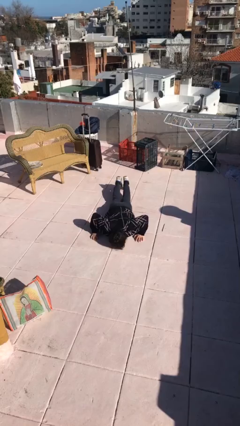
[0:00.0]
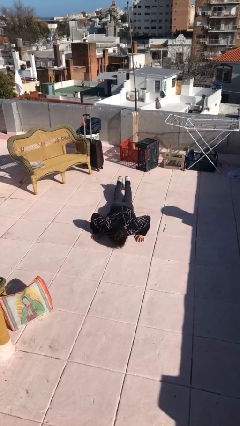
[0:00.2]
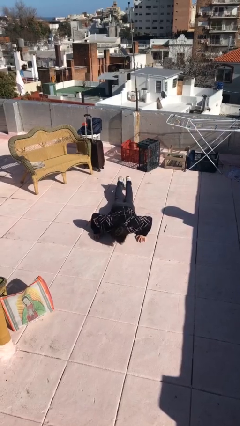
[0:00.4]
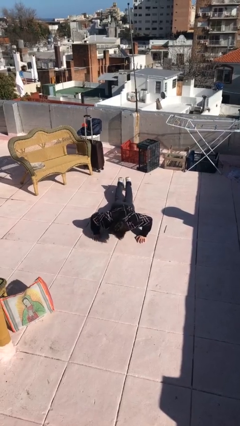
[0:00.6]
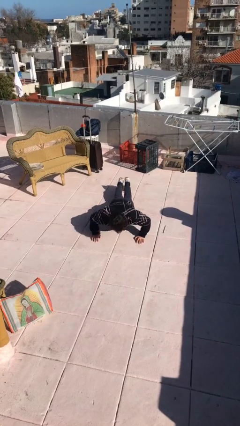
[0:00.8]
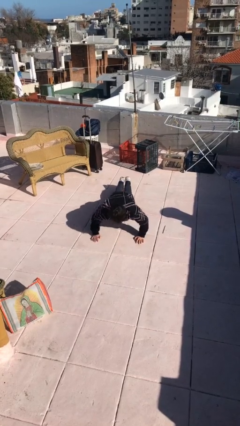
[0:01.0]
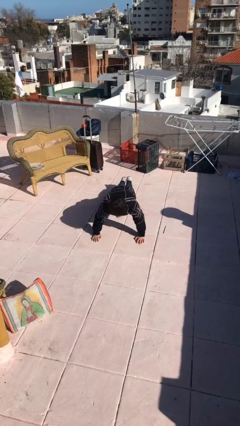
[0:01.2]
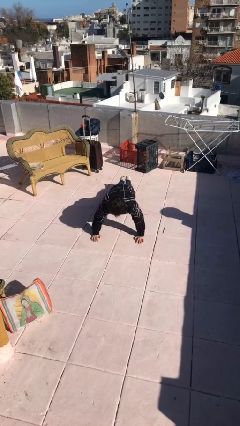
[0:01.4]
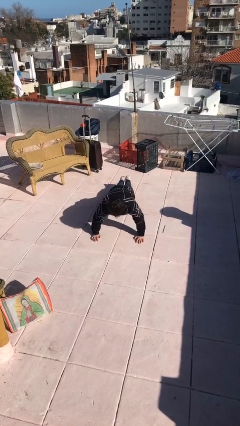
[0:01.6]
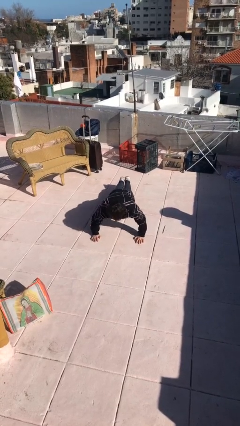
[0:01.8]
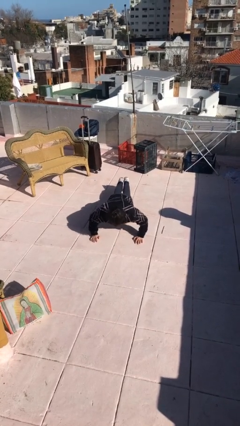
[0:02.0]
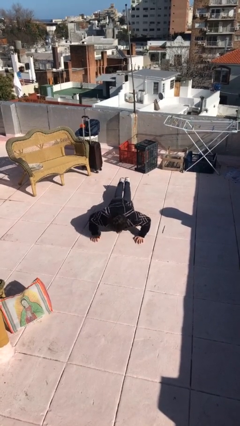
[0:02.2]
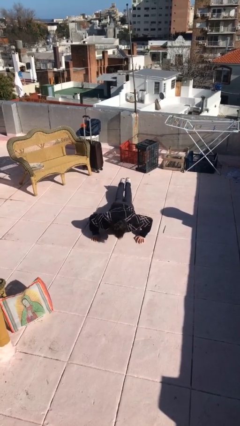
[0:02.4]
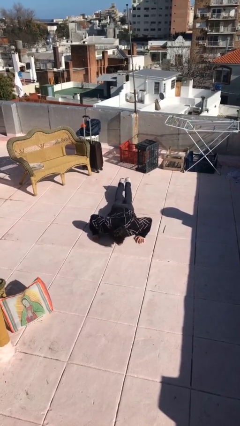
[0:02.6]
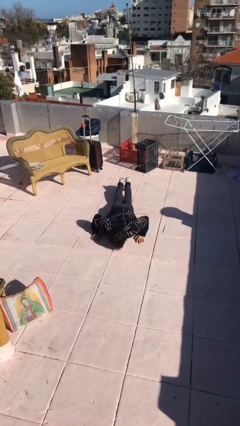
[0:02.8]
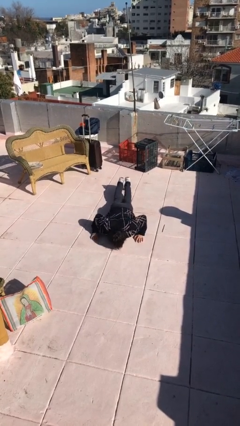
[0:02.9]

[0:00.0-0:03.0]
person exercises with pushup

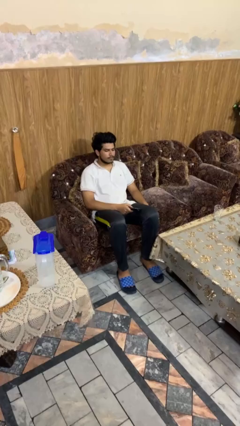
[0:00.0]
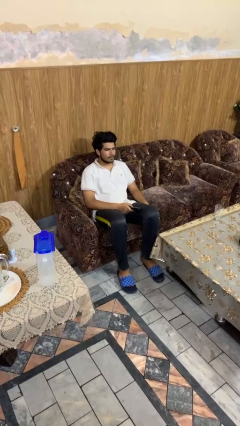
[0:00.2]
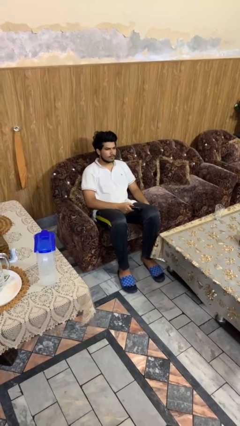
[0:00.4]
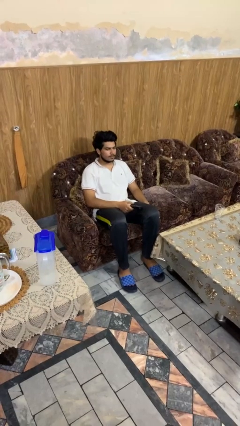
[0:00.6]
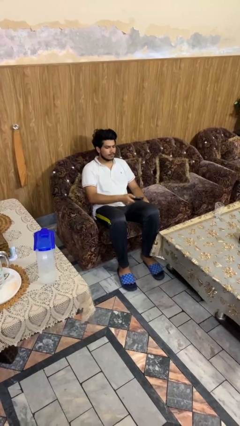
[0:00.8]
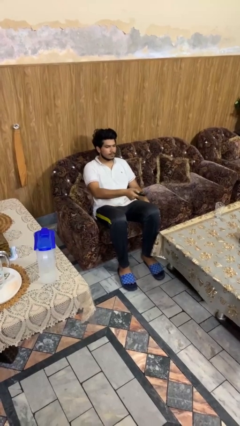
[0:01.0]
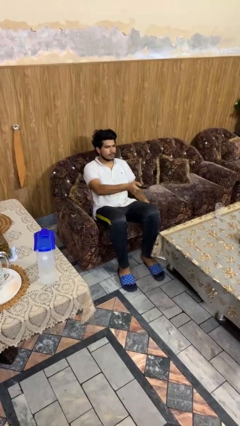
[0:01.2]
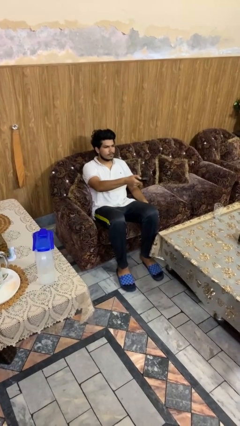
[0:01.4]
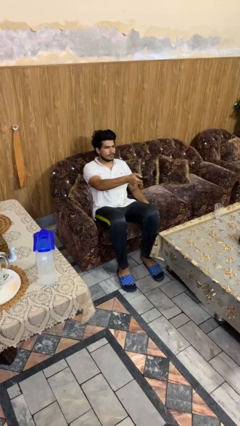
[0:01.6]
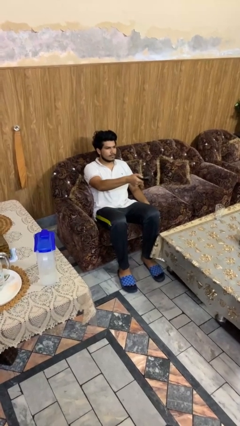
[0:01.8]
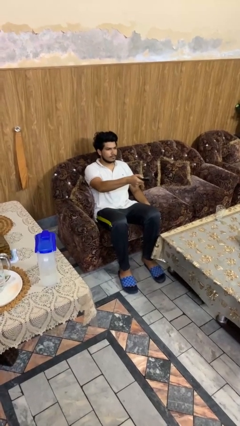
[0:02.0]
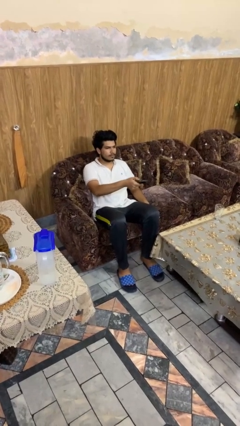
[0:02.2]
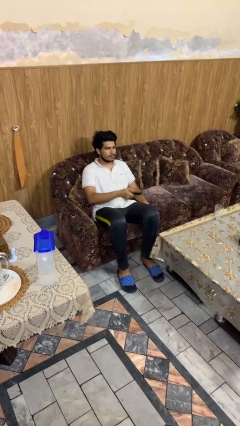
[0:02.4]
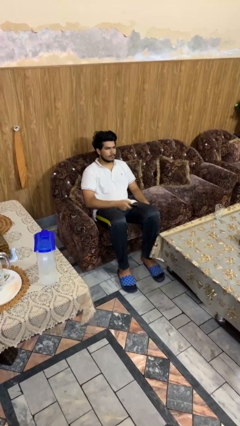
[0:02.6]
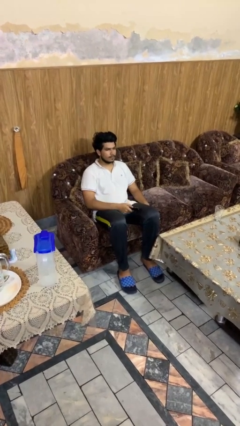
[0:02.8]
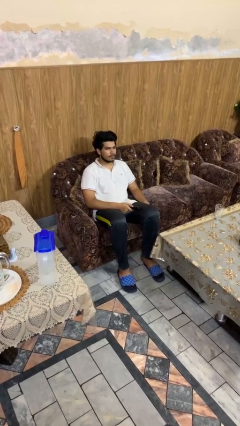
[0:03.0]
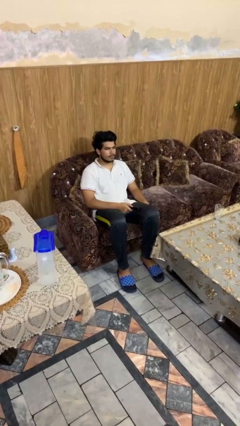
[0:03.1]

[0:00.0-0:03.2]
person uses television remote

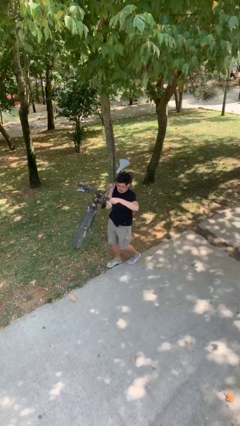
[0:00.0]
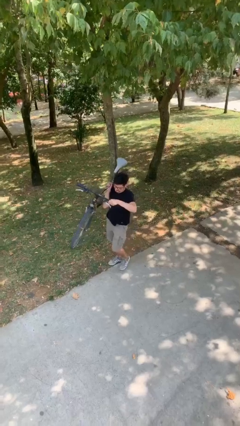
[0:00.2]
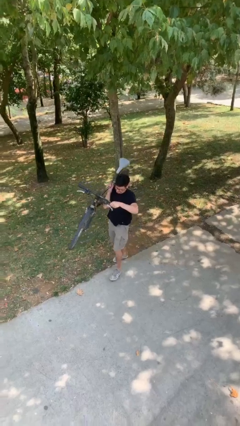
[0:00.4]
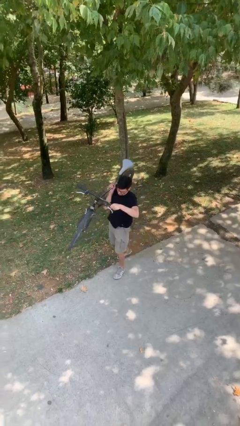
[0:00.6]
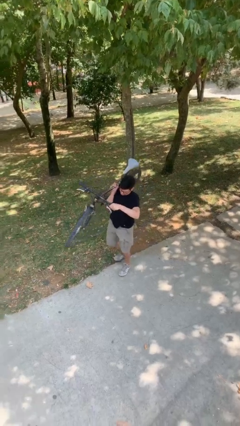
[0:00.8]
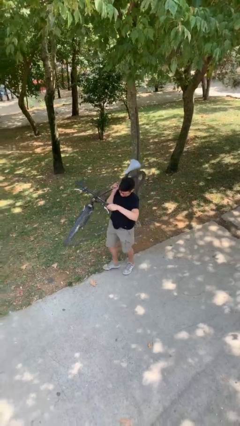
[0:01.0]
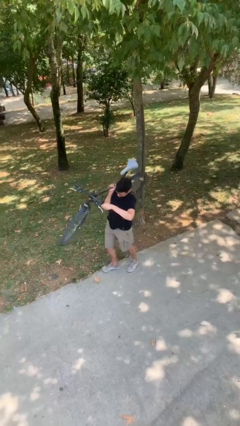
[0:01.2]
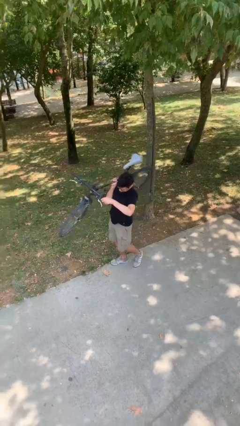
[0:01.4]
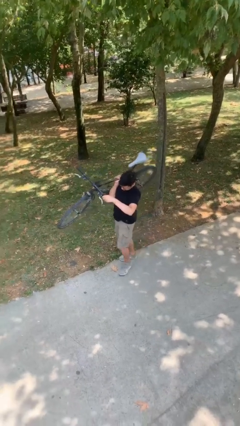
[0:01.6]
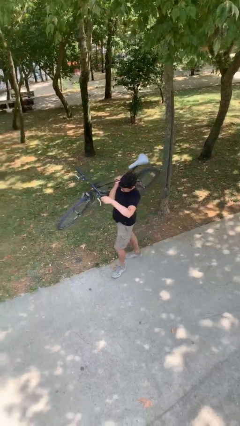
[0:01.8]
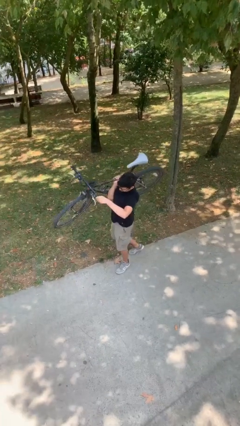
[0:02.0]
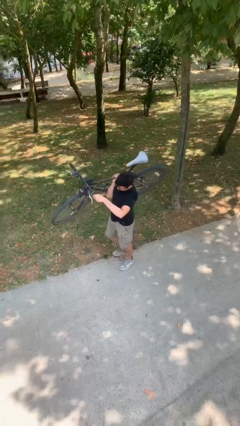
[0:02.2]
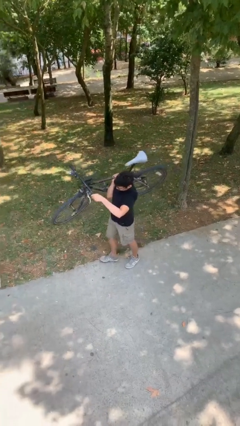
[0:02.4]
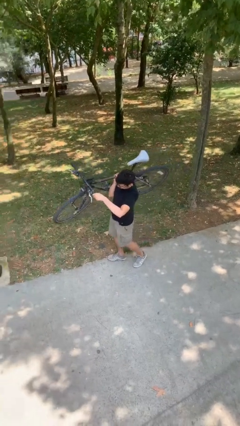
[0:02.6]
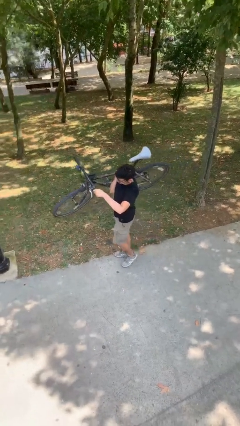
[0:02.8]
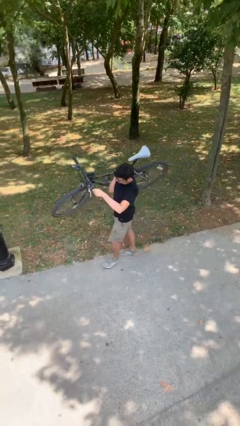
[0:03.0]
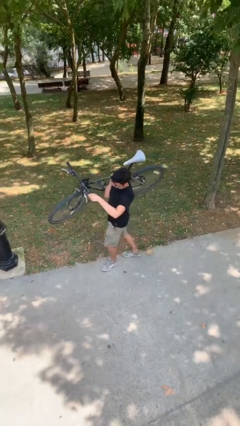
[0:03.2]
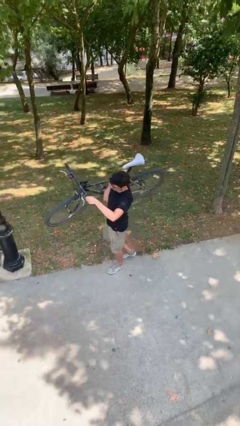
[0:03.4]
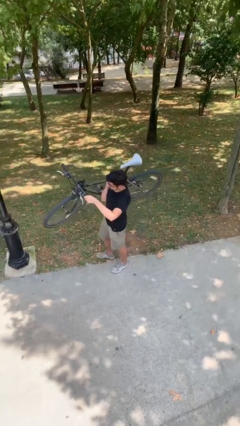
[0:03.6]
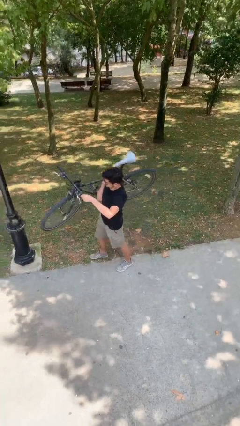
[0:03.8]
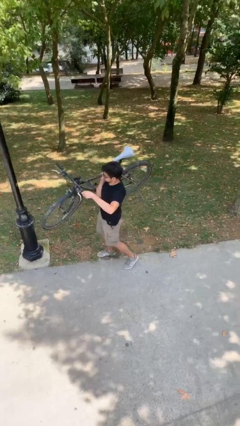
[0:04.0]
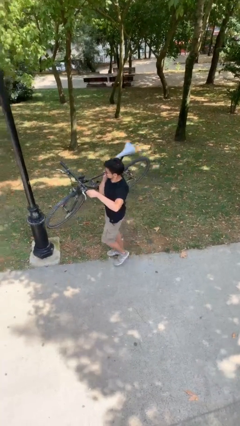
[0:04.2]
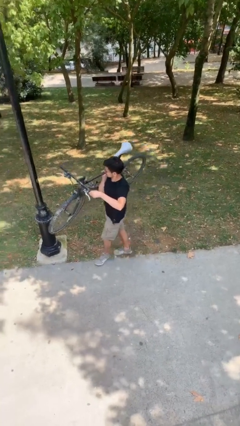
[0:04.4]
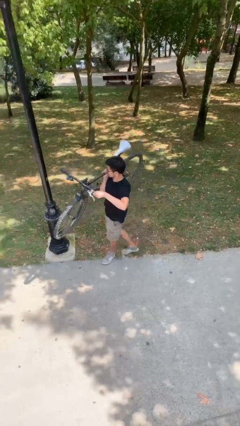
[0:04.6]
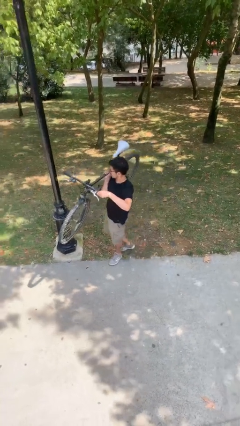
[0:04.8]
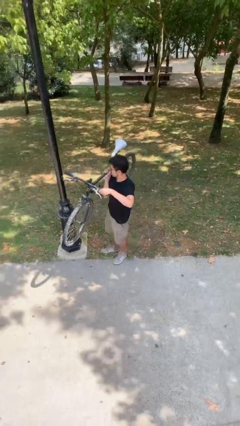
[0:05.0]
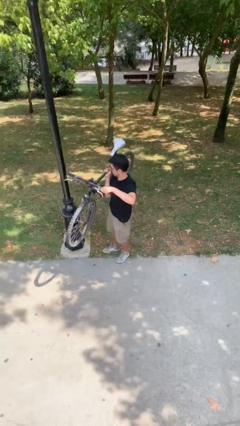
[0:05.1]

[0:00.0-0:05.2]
person carries heavy object

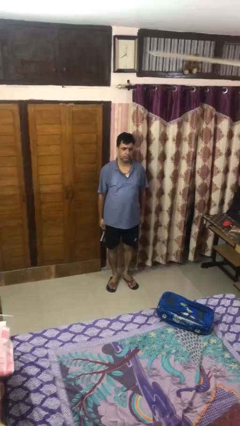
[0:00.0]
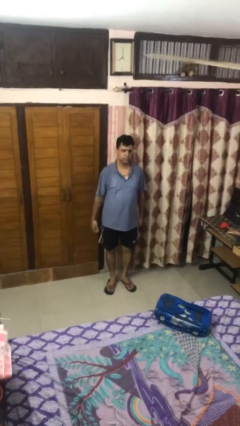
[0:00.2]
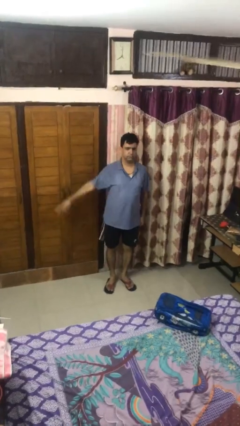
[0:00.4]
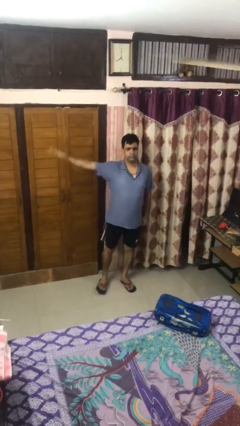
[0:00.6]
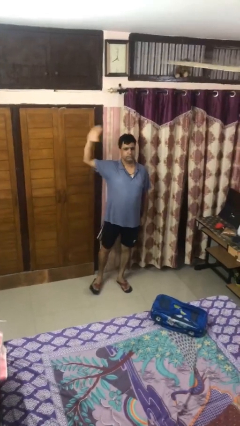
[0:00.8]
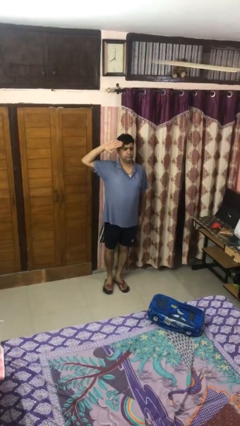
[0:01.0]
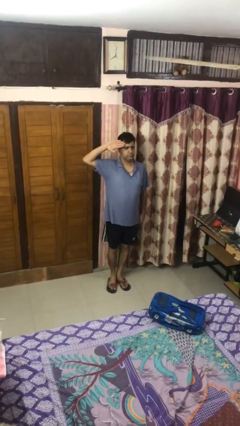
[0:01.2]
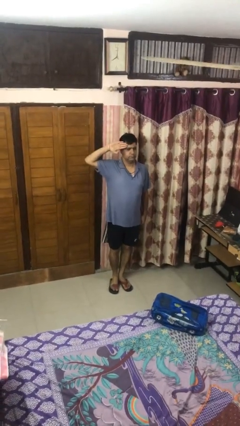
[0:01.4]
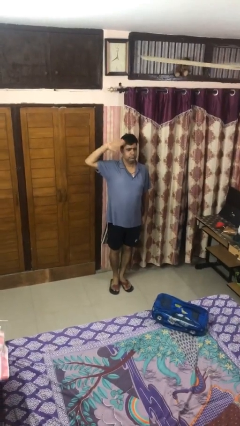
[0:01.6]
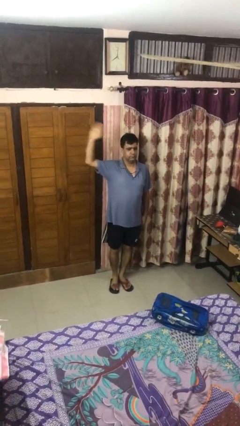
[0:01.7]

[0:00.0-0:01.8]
person salutes

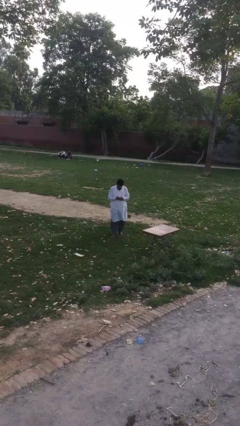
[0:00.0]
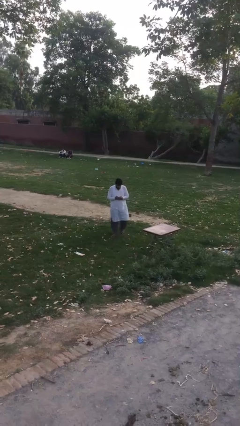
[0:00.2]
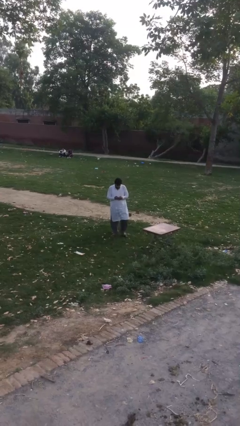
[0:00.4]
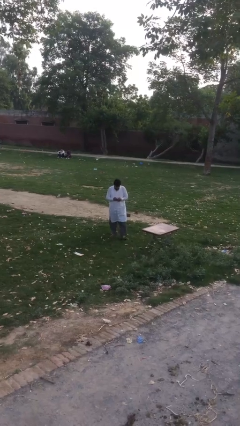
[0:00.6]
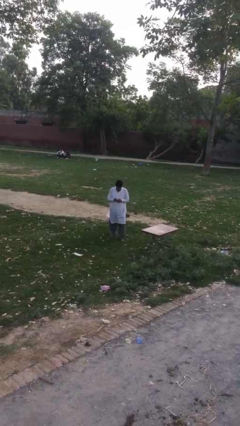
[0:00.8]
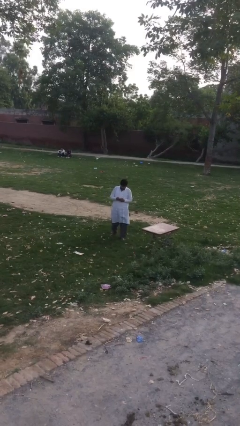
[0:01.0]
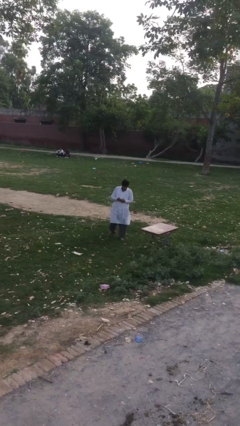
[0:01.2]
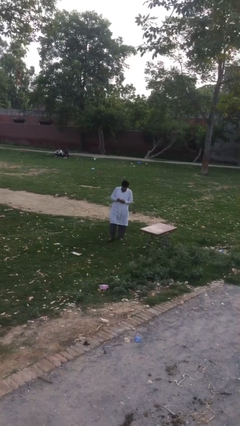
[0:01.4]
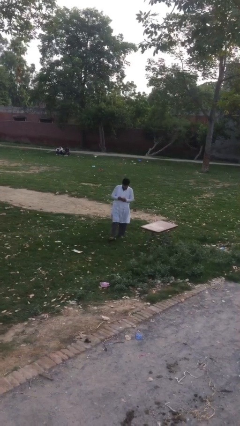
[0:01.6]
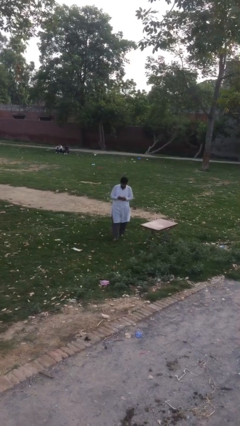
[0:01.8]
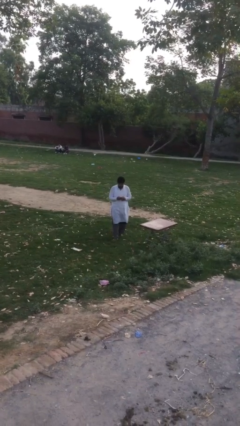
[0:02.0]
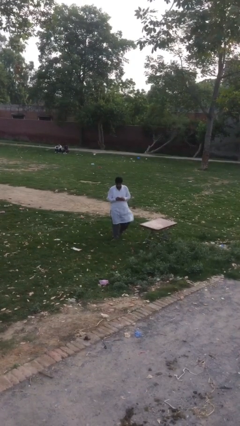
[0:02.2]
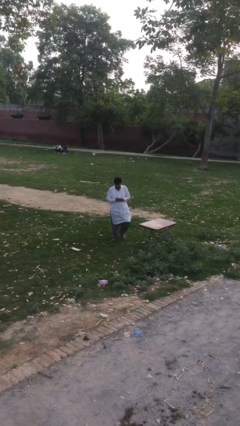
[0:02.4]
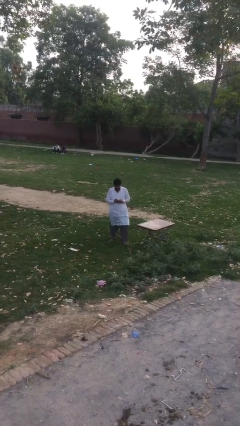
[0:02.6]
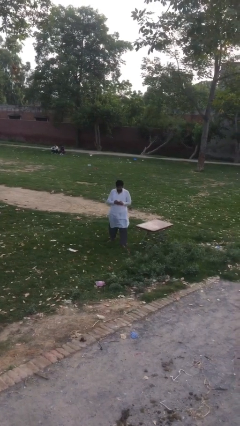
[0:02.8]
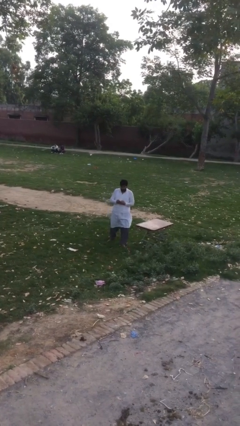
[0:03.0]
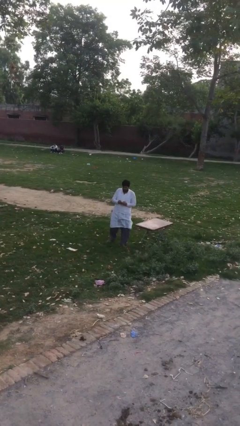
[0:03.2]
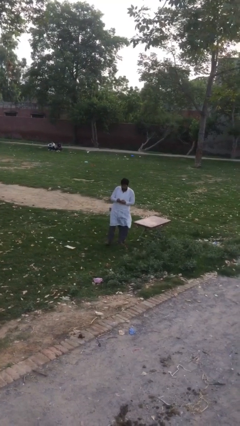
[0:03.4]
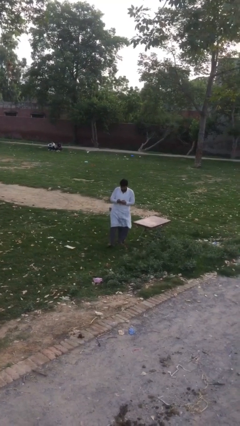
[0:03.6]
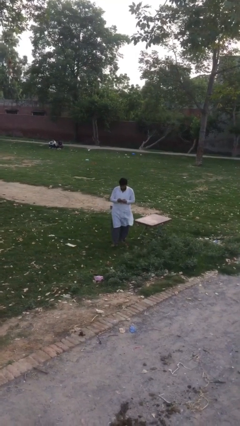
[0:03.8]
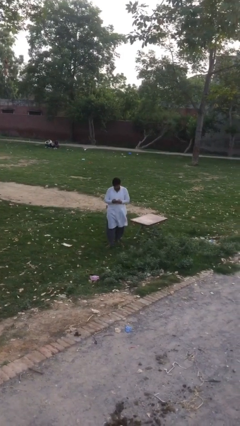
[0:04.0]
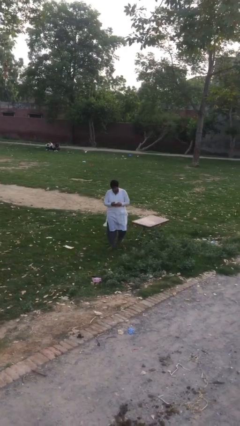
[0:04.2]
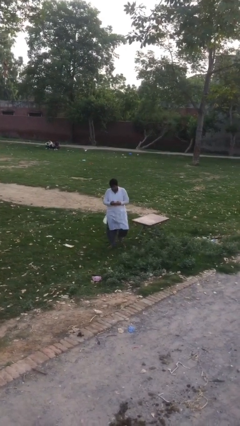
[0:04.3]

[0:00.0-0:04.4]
person texts on phone

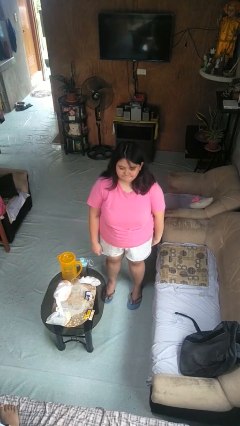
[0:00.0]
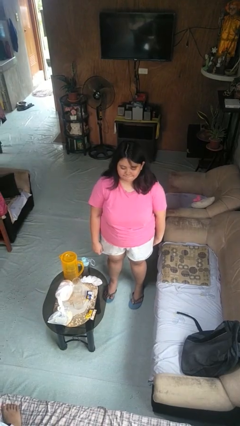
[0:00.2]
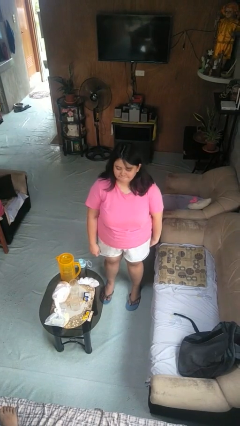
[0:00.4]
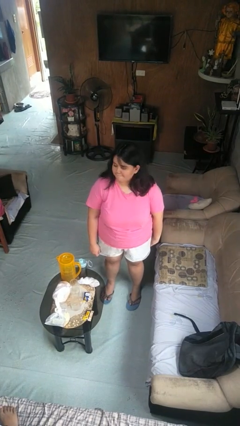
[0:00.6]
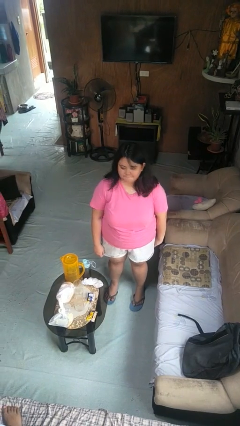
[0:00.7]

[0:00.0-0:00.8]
person shakes head
